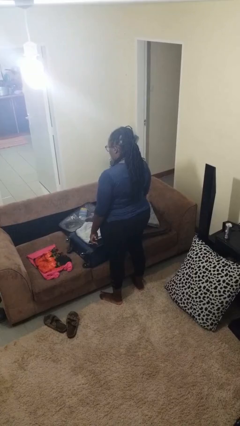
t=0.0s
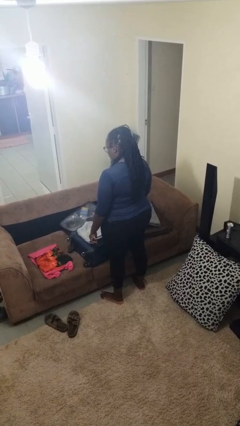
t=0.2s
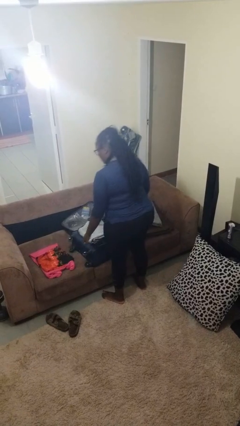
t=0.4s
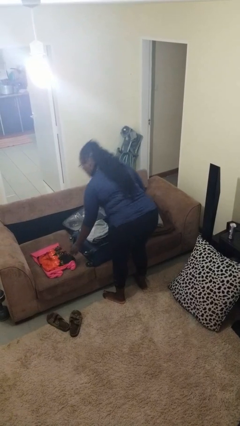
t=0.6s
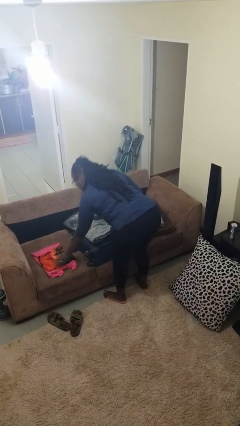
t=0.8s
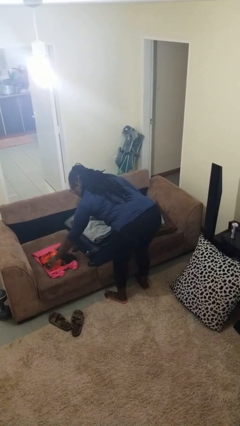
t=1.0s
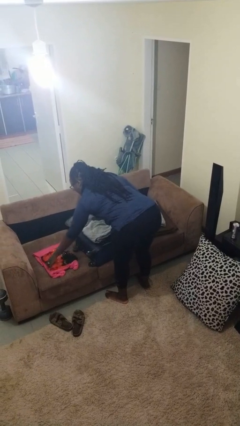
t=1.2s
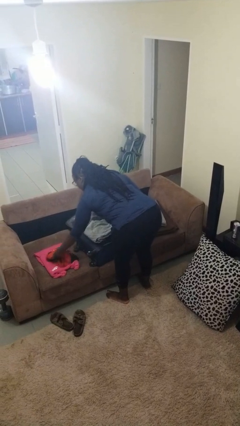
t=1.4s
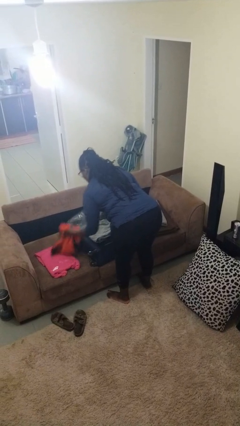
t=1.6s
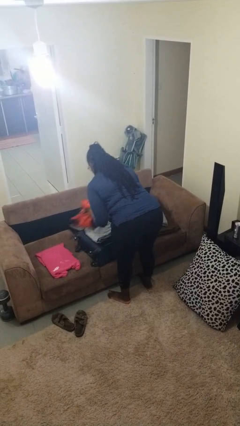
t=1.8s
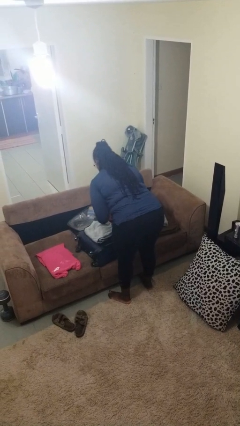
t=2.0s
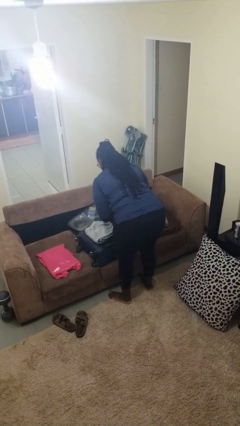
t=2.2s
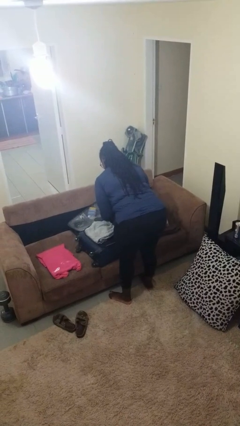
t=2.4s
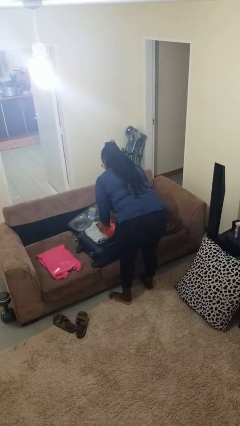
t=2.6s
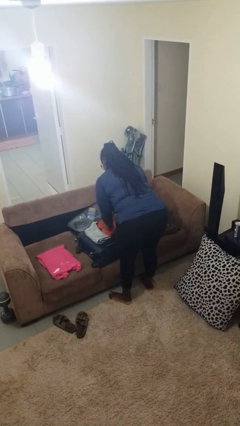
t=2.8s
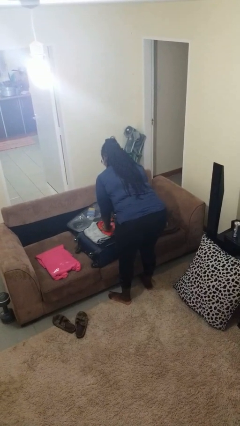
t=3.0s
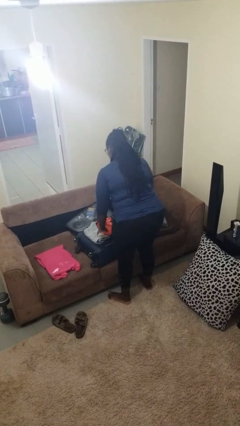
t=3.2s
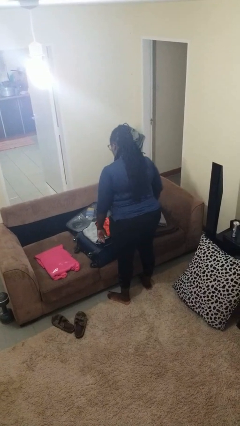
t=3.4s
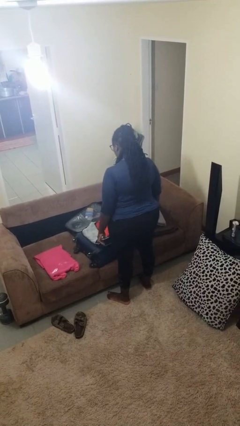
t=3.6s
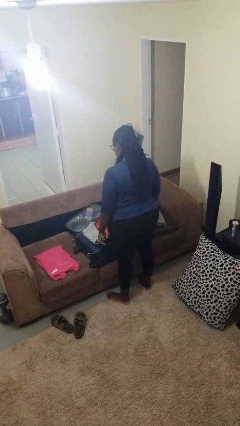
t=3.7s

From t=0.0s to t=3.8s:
person loads clothes into suitcase

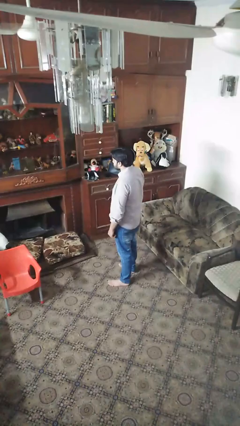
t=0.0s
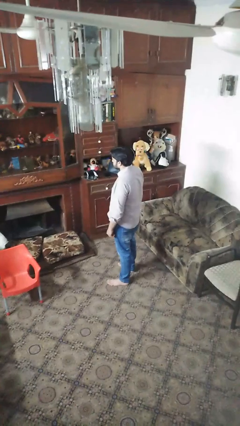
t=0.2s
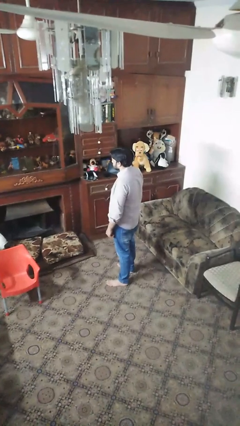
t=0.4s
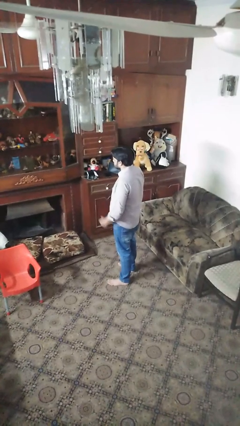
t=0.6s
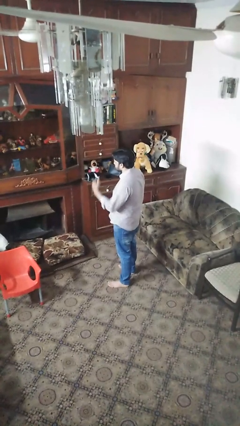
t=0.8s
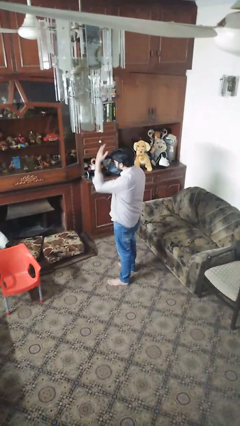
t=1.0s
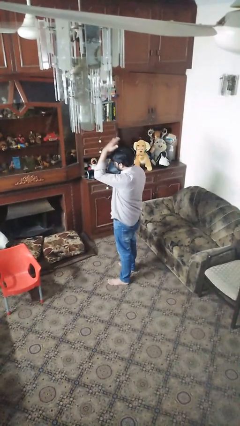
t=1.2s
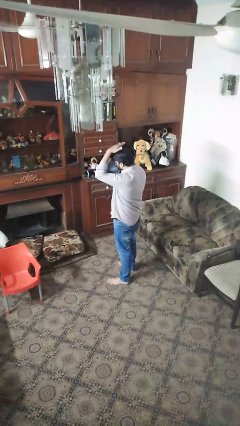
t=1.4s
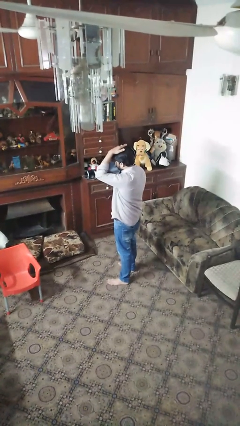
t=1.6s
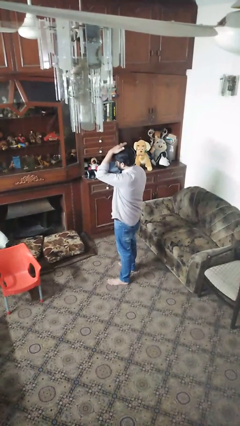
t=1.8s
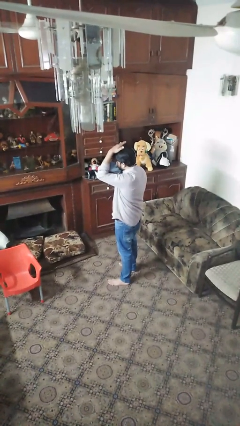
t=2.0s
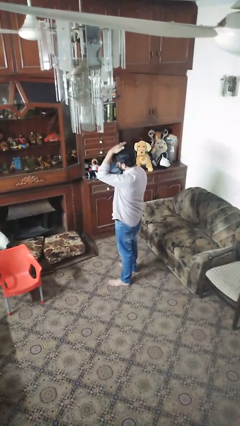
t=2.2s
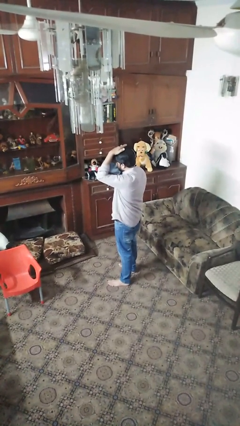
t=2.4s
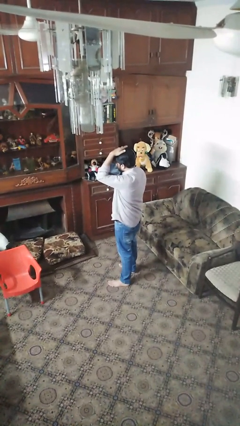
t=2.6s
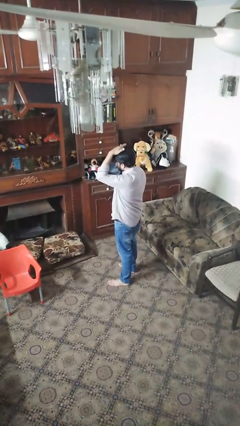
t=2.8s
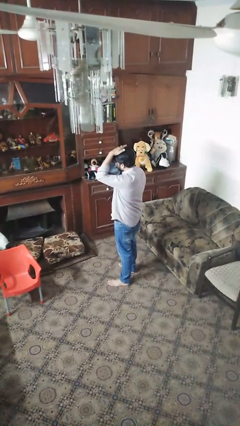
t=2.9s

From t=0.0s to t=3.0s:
person pats head

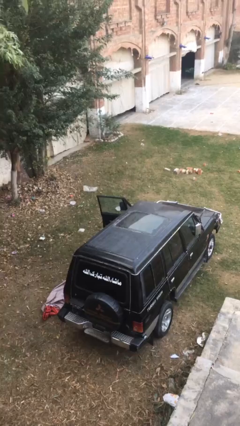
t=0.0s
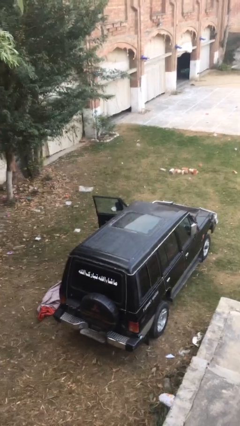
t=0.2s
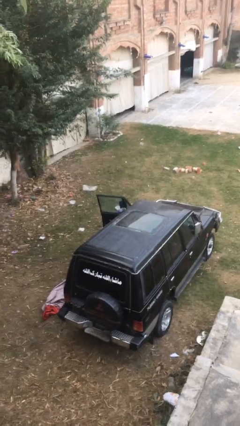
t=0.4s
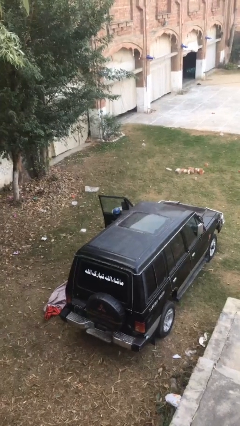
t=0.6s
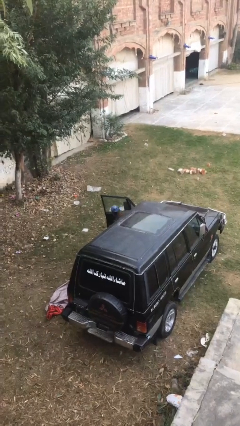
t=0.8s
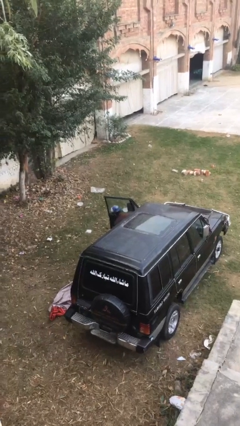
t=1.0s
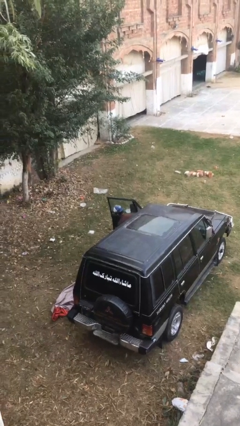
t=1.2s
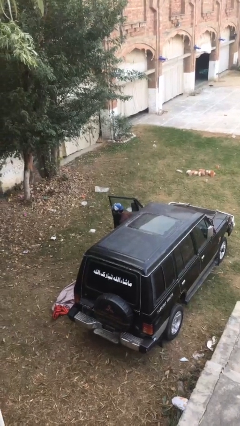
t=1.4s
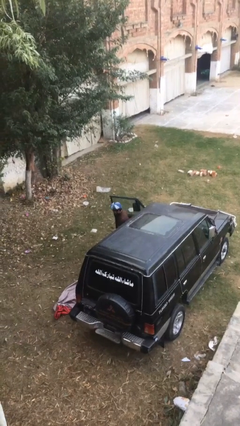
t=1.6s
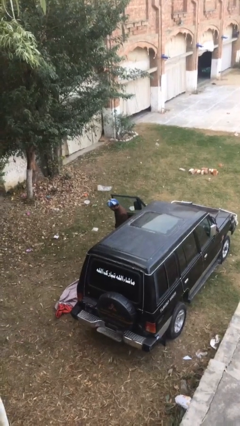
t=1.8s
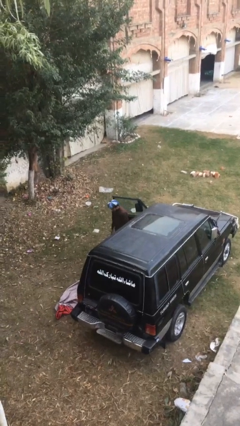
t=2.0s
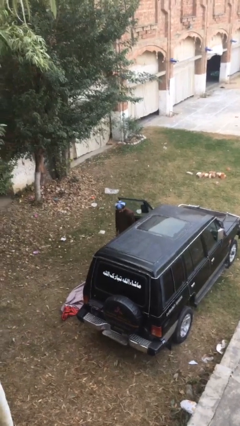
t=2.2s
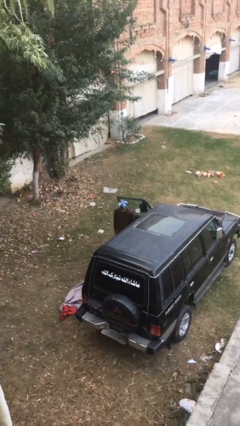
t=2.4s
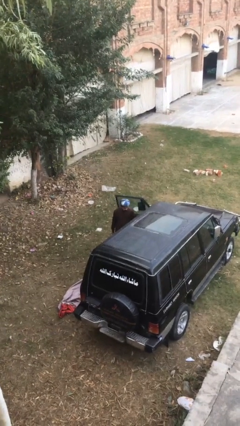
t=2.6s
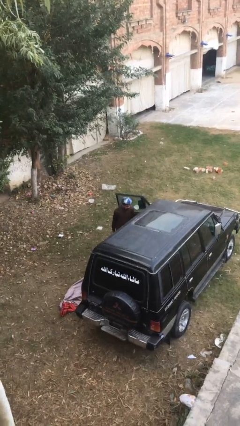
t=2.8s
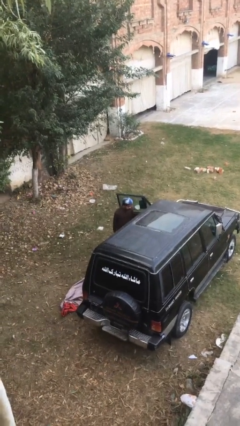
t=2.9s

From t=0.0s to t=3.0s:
person exits car

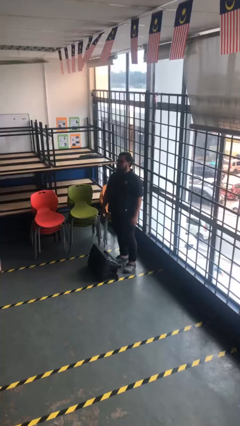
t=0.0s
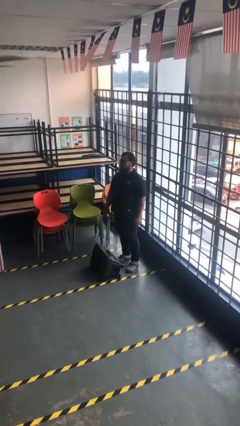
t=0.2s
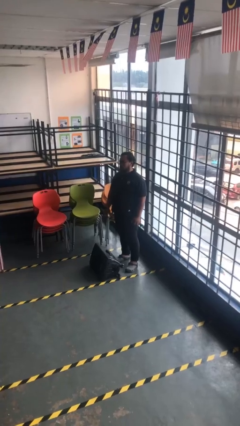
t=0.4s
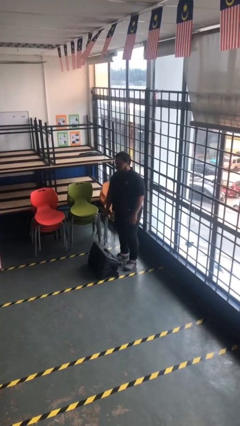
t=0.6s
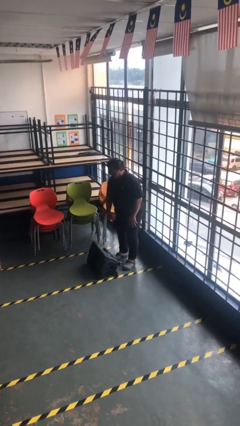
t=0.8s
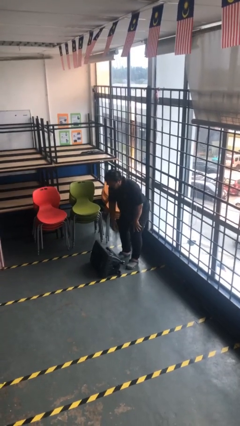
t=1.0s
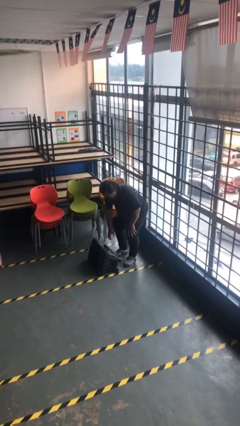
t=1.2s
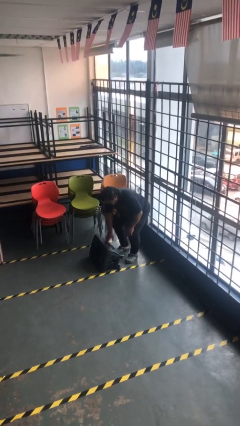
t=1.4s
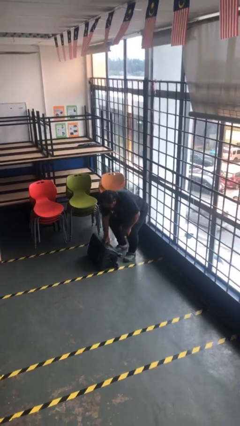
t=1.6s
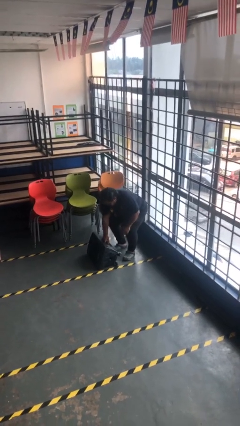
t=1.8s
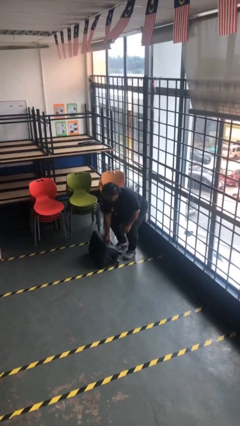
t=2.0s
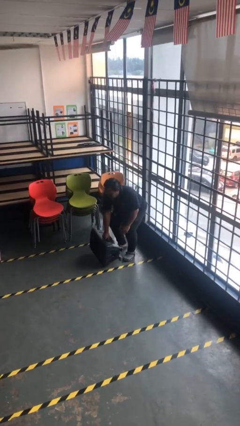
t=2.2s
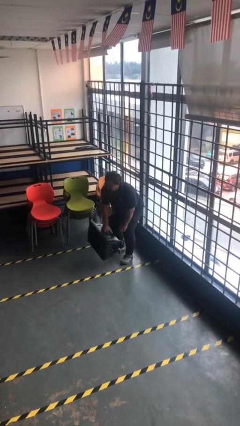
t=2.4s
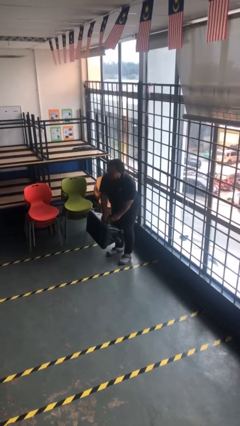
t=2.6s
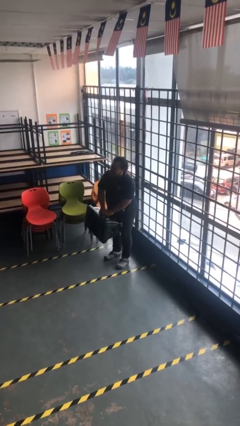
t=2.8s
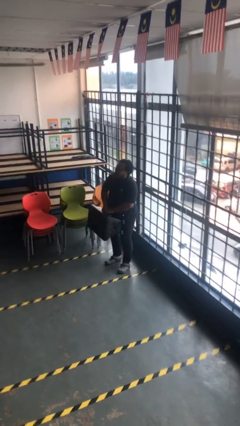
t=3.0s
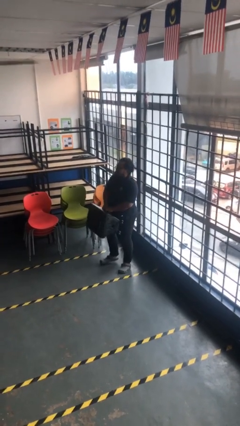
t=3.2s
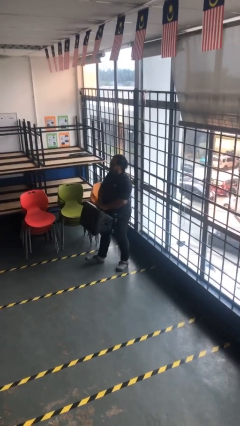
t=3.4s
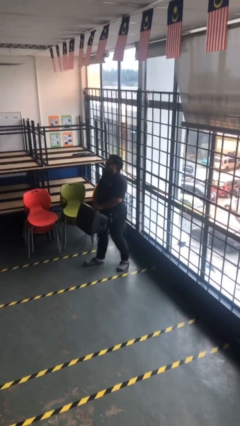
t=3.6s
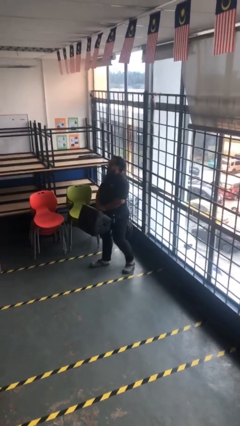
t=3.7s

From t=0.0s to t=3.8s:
person picks up object from floor

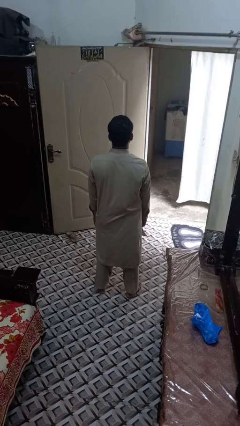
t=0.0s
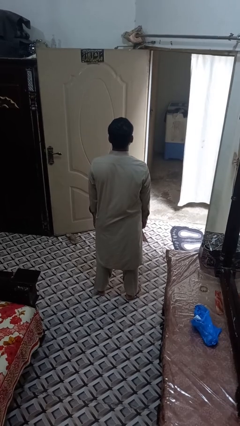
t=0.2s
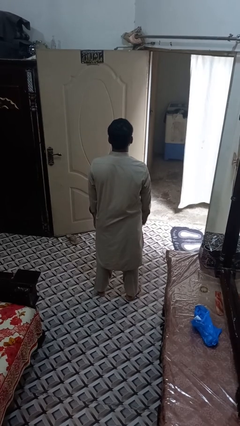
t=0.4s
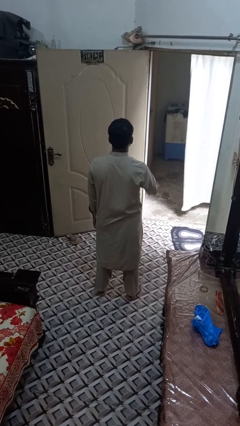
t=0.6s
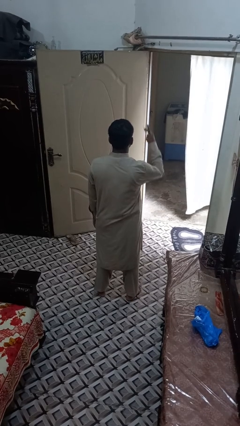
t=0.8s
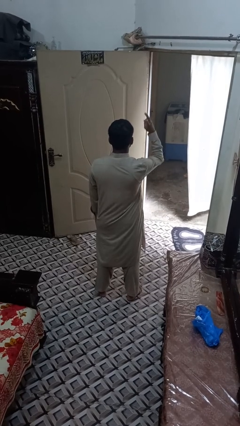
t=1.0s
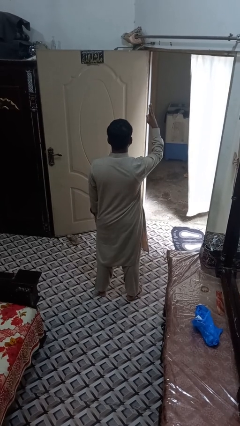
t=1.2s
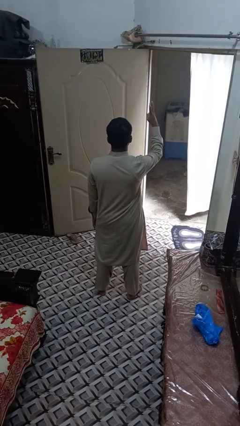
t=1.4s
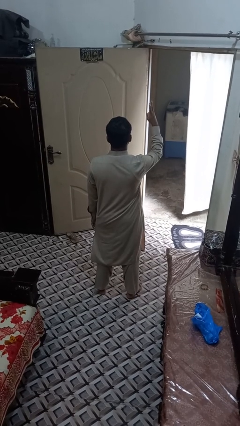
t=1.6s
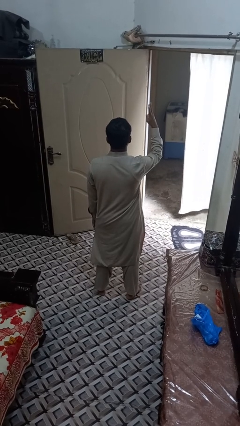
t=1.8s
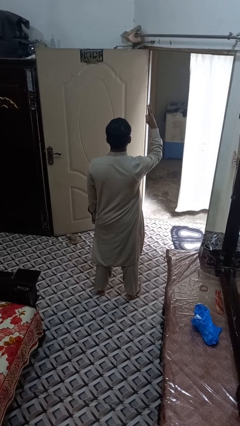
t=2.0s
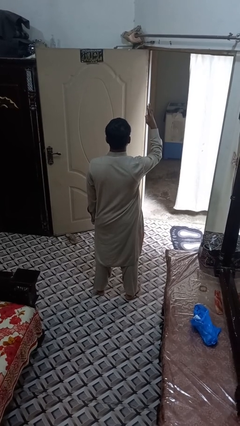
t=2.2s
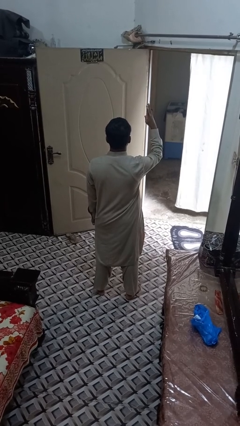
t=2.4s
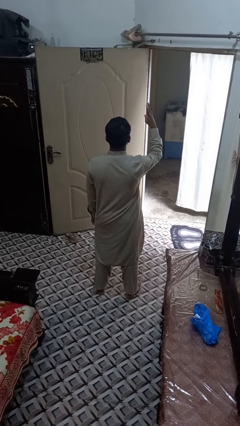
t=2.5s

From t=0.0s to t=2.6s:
person gestures number three

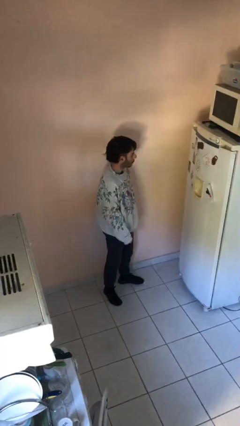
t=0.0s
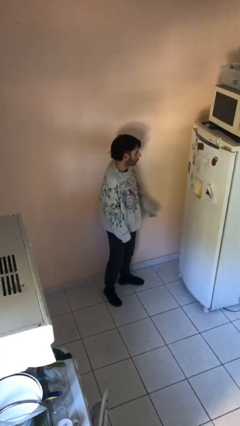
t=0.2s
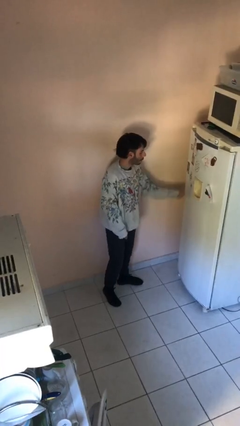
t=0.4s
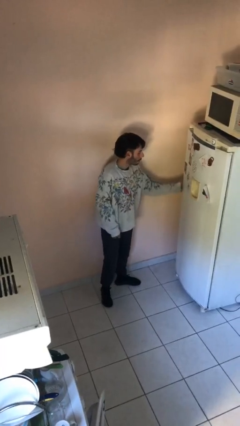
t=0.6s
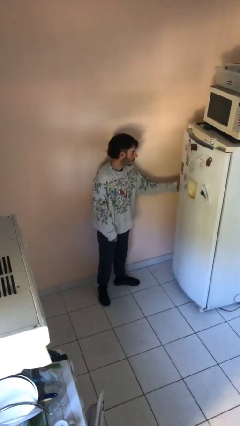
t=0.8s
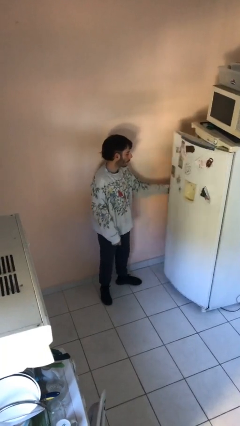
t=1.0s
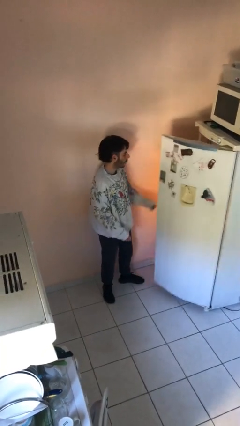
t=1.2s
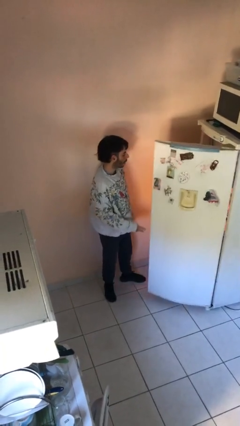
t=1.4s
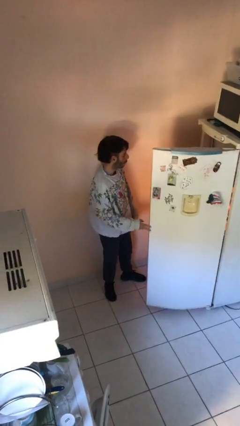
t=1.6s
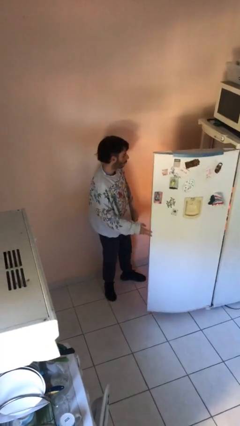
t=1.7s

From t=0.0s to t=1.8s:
person opens refrigerator
